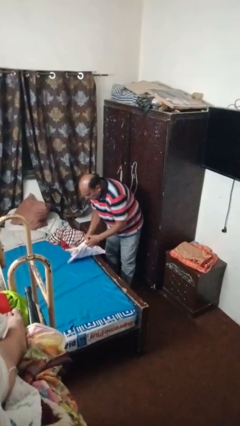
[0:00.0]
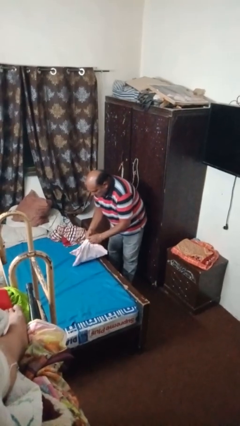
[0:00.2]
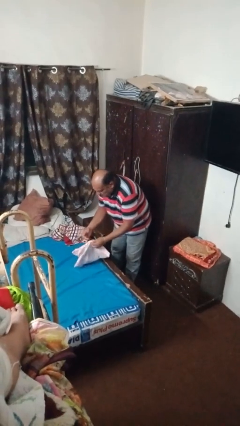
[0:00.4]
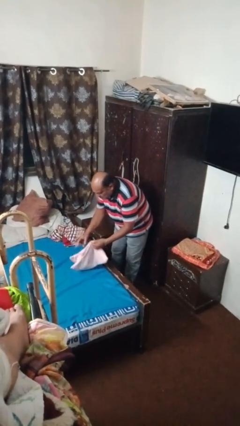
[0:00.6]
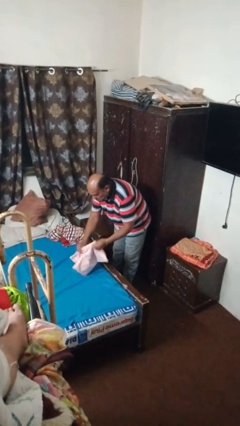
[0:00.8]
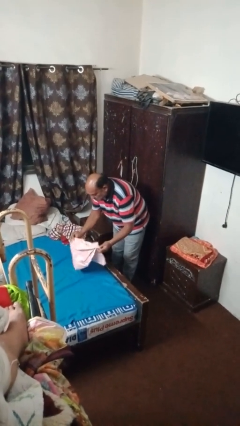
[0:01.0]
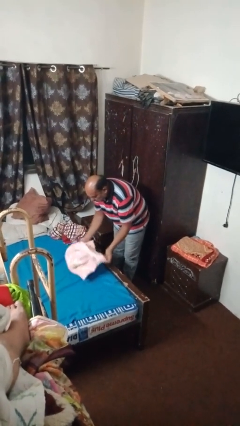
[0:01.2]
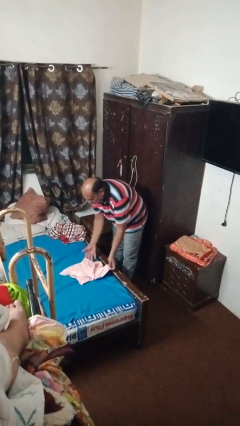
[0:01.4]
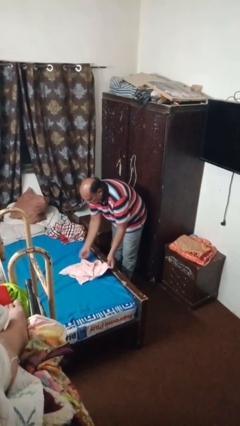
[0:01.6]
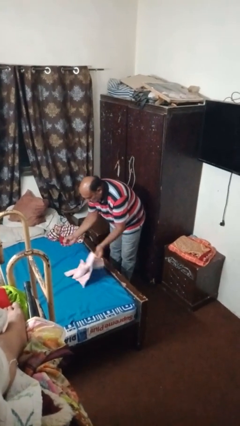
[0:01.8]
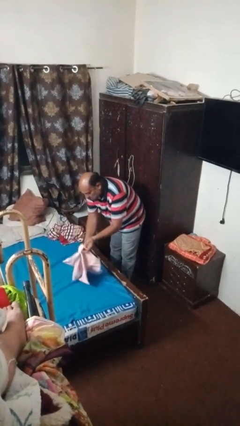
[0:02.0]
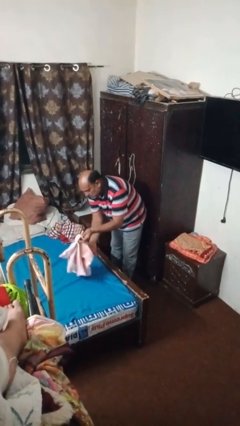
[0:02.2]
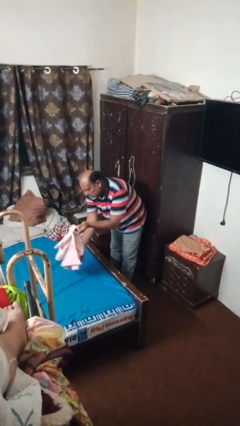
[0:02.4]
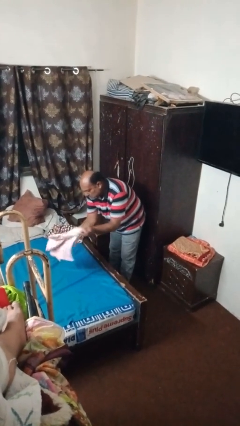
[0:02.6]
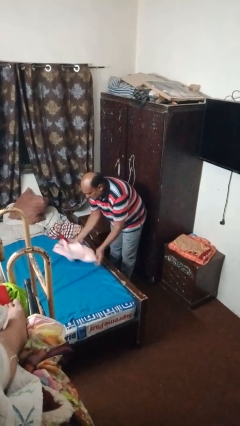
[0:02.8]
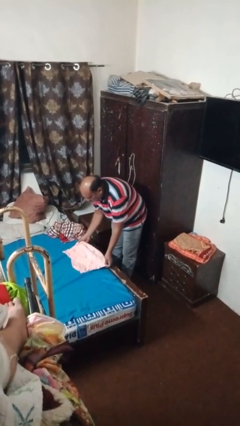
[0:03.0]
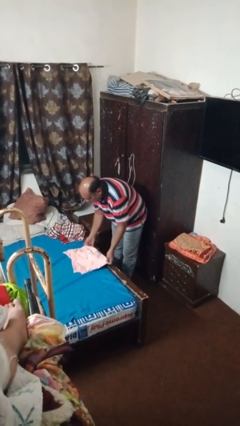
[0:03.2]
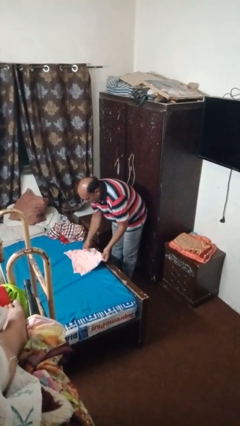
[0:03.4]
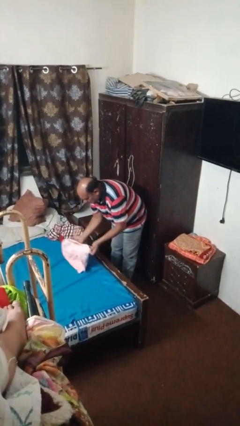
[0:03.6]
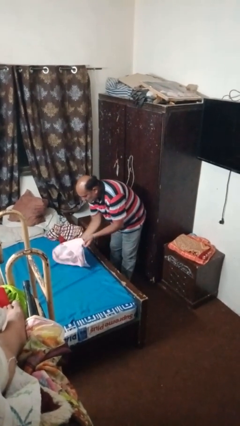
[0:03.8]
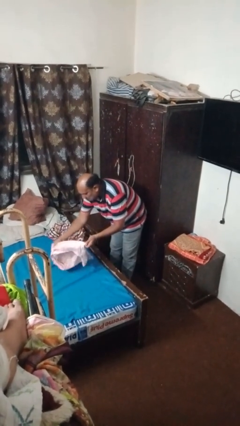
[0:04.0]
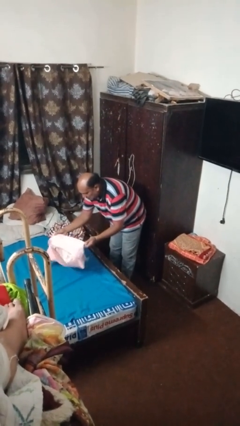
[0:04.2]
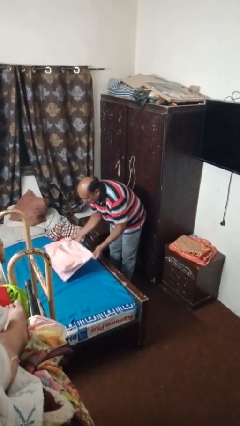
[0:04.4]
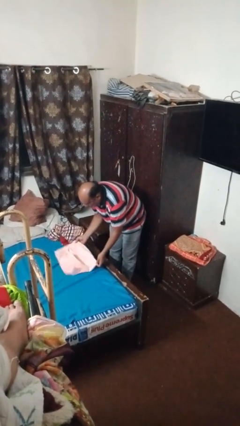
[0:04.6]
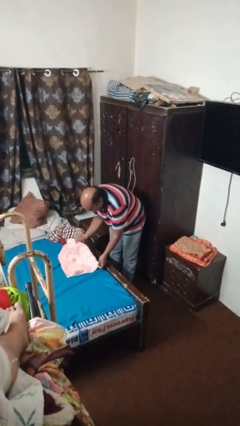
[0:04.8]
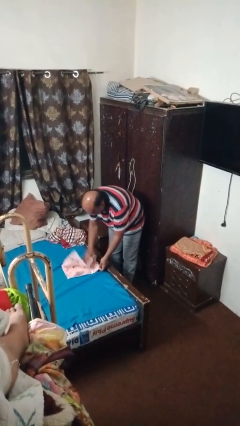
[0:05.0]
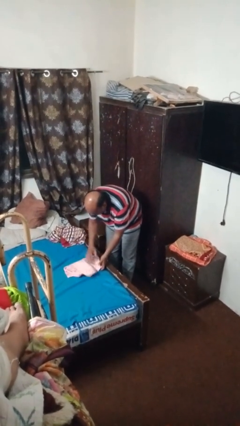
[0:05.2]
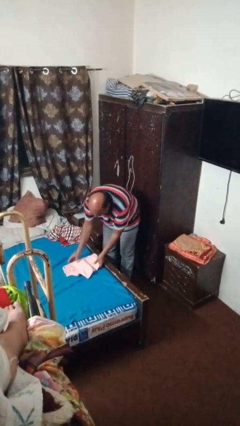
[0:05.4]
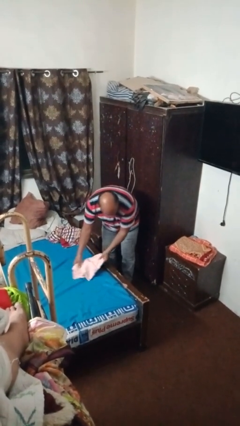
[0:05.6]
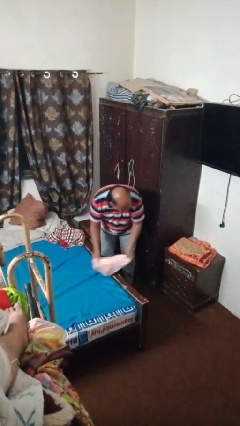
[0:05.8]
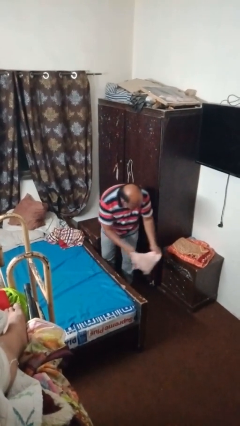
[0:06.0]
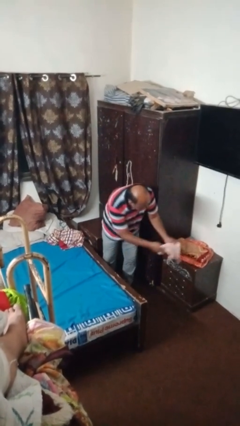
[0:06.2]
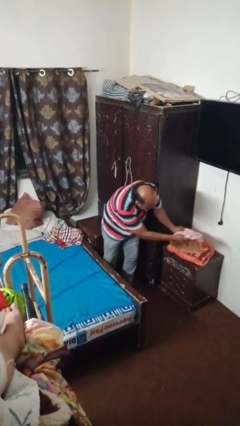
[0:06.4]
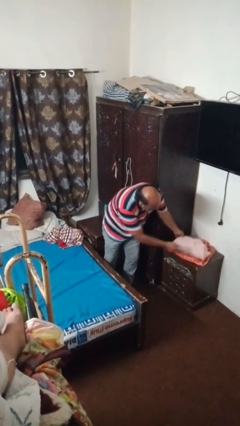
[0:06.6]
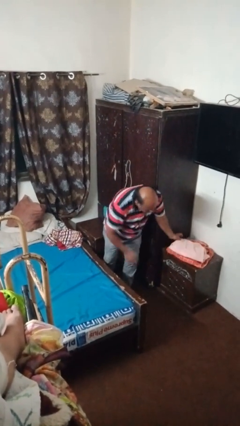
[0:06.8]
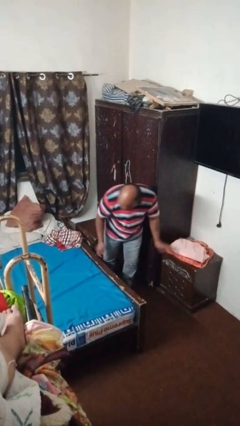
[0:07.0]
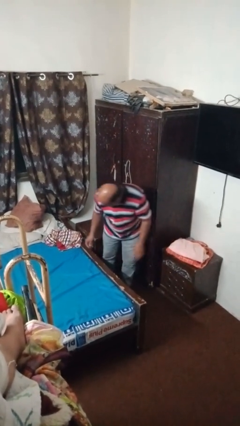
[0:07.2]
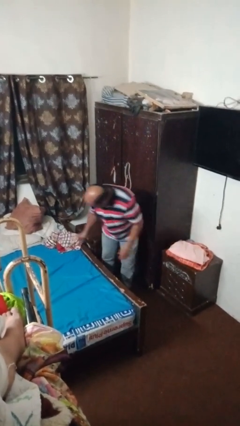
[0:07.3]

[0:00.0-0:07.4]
person folds towel

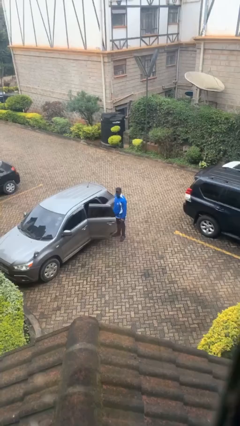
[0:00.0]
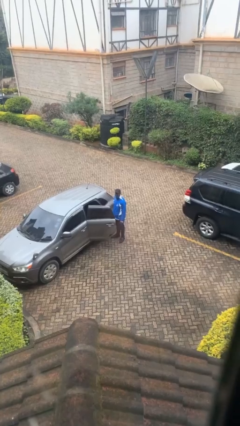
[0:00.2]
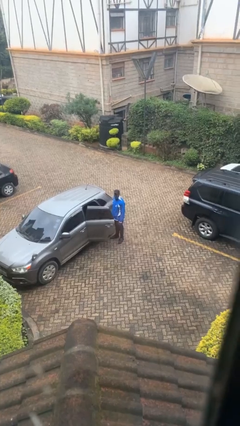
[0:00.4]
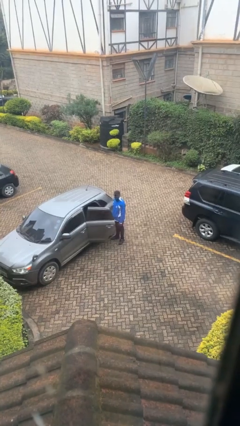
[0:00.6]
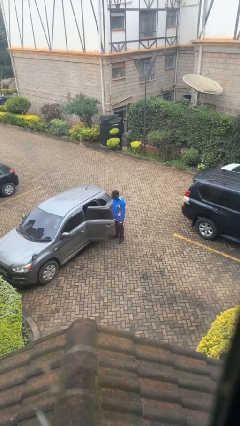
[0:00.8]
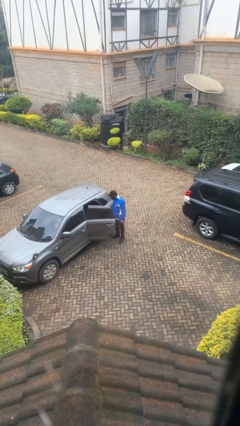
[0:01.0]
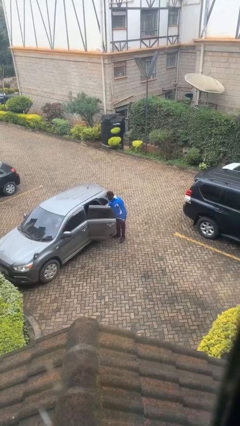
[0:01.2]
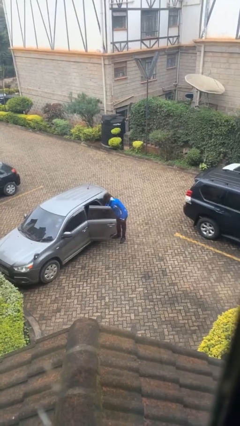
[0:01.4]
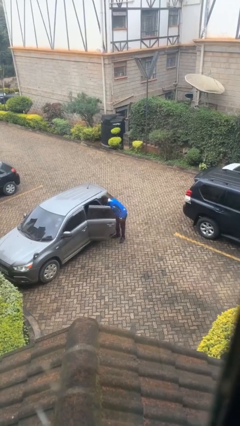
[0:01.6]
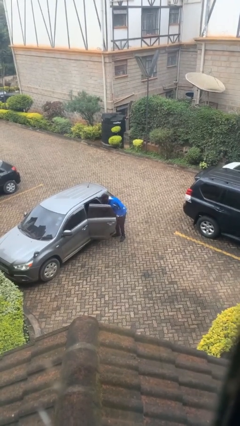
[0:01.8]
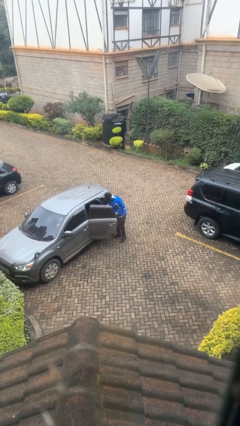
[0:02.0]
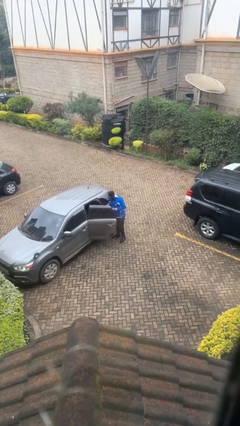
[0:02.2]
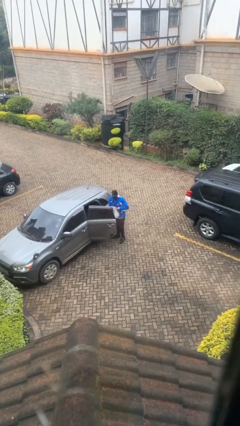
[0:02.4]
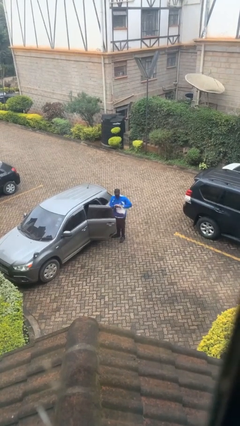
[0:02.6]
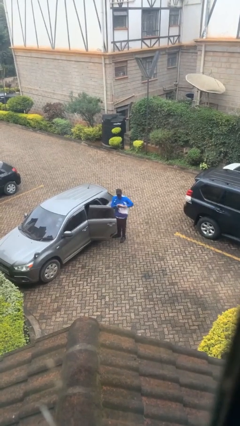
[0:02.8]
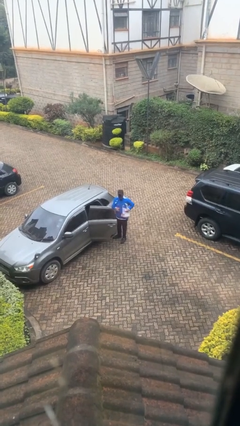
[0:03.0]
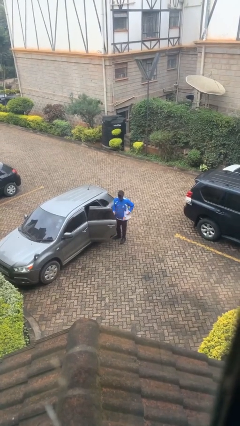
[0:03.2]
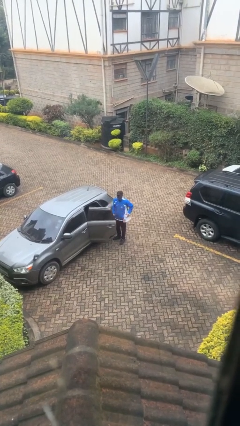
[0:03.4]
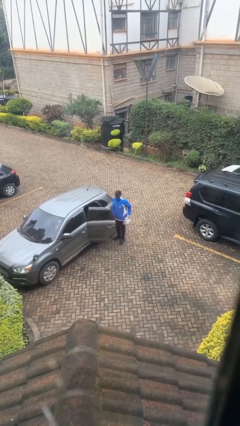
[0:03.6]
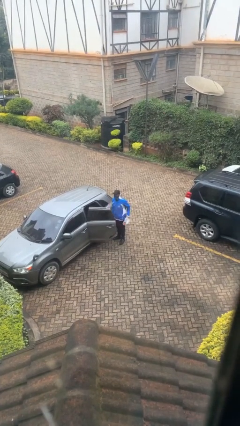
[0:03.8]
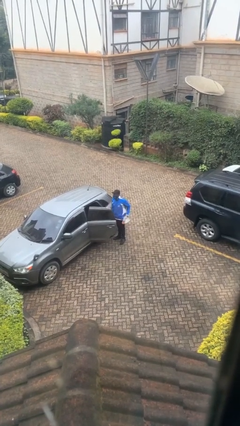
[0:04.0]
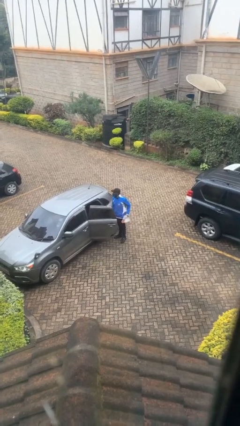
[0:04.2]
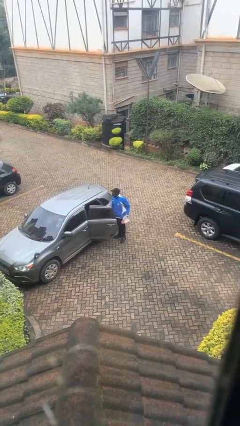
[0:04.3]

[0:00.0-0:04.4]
person unloads car

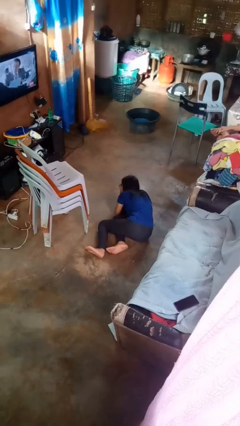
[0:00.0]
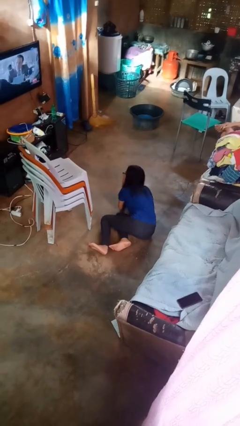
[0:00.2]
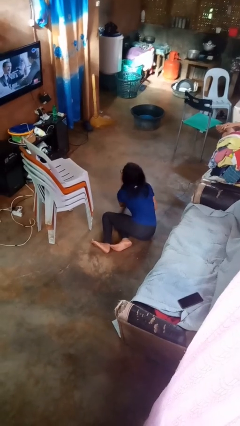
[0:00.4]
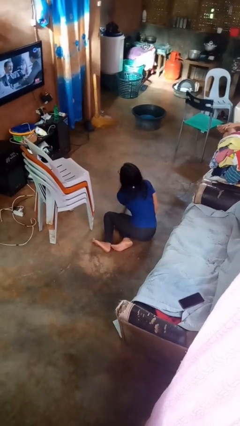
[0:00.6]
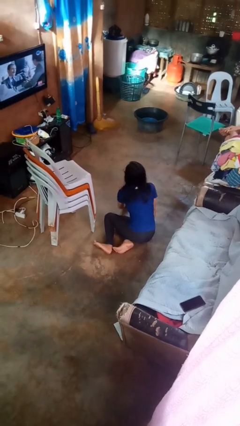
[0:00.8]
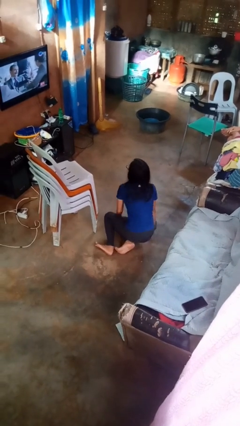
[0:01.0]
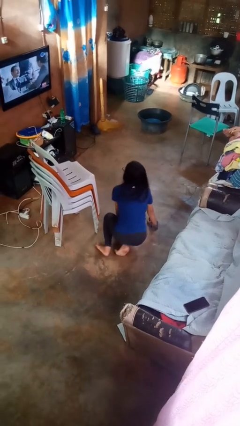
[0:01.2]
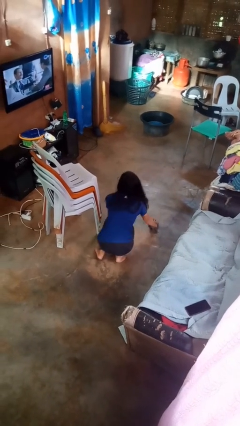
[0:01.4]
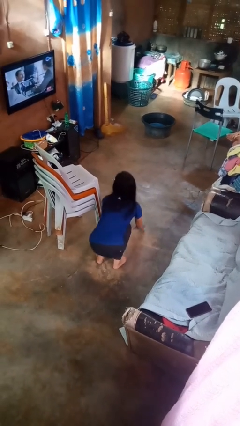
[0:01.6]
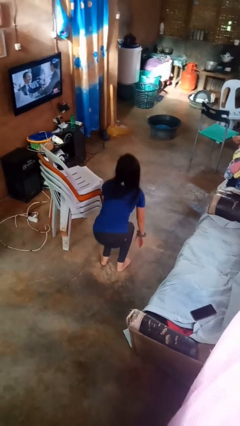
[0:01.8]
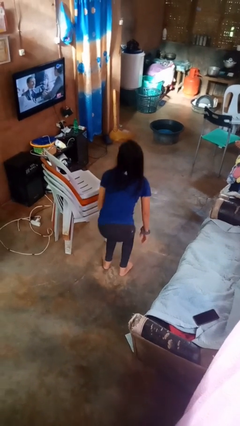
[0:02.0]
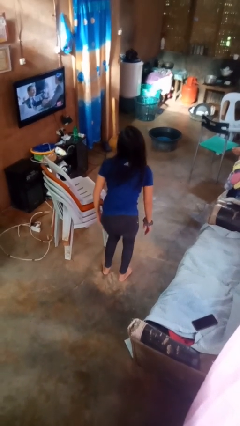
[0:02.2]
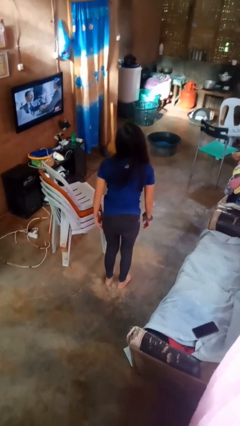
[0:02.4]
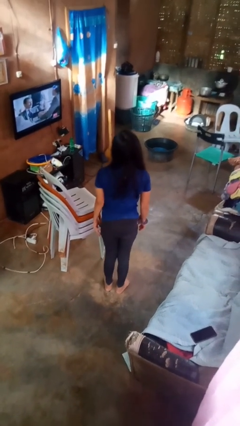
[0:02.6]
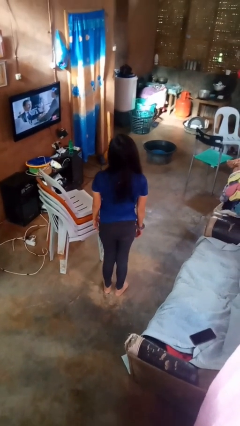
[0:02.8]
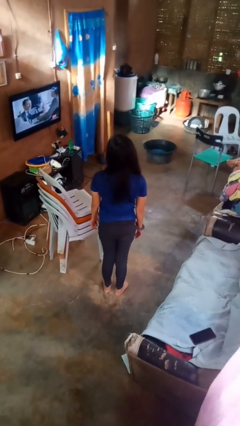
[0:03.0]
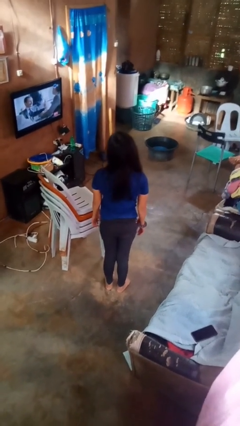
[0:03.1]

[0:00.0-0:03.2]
person stands up from floor

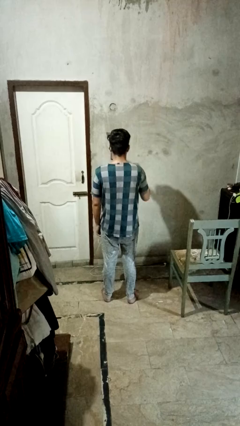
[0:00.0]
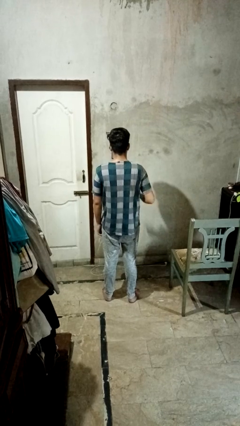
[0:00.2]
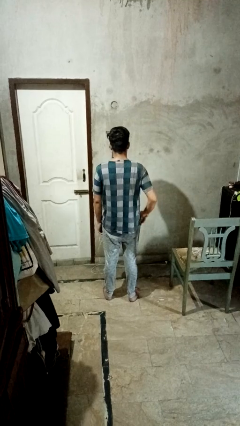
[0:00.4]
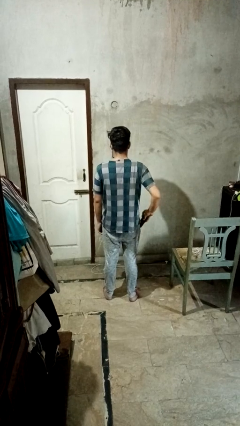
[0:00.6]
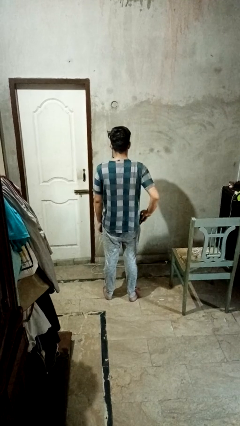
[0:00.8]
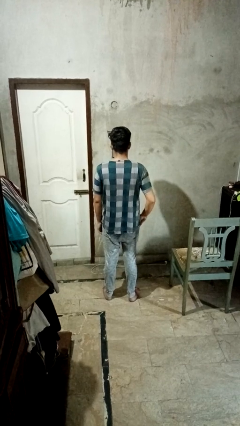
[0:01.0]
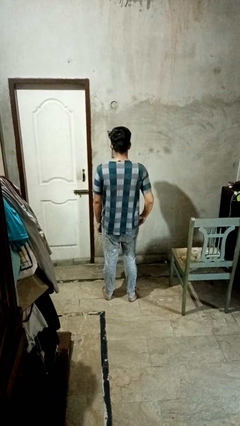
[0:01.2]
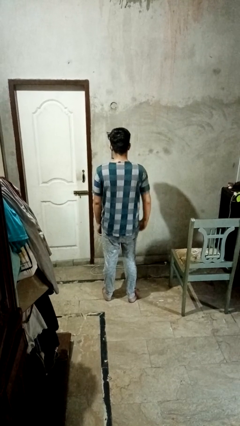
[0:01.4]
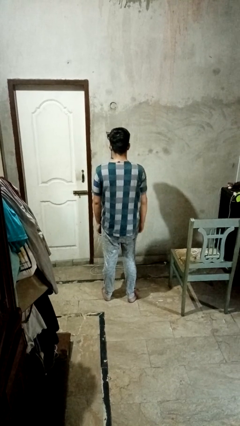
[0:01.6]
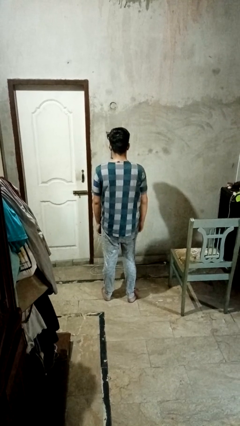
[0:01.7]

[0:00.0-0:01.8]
person puts phone into pocket

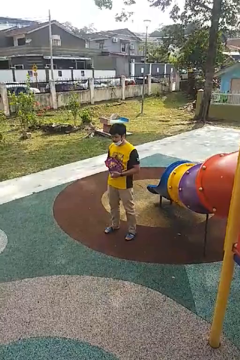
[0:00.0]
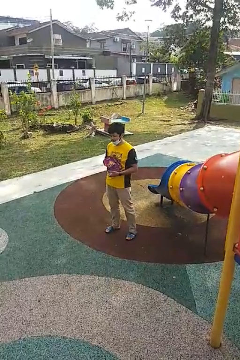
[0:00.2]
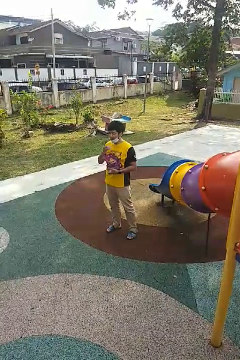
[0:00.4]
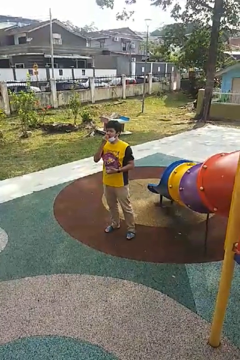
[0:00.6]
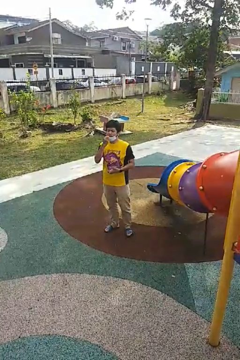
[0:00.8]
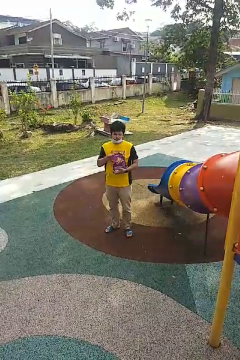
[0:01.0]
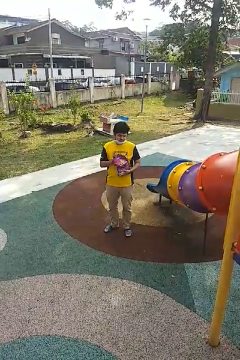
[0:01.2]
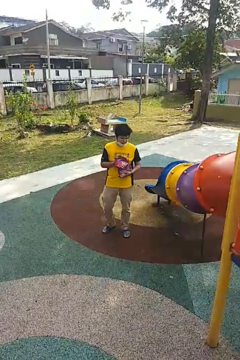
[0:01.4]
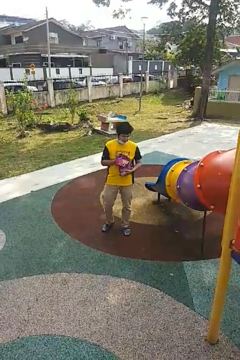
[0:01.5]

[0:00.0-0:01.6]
person eats snack from bag
